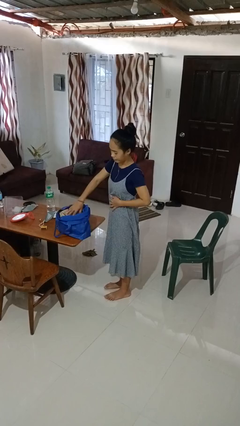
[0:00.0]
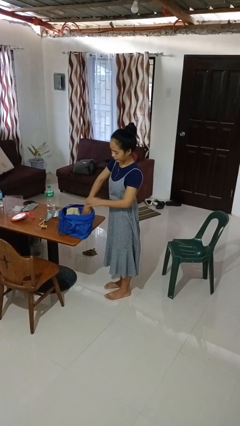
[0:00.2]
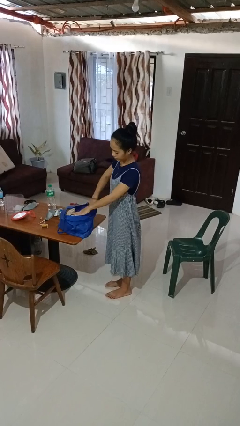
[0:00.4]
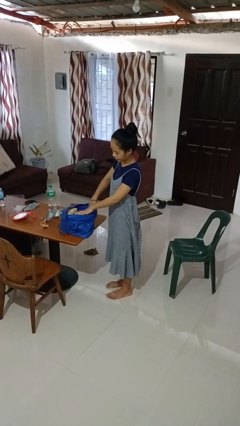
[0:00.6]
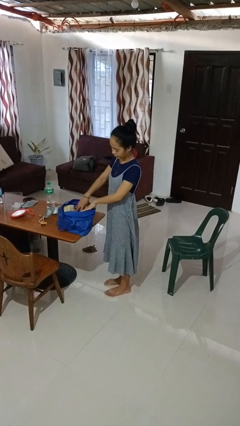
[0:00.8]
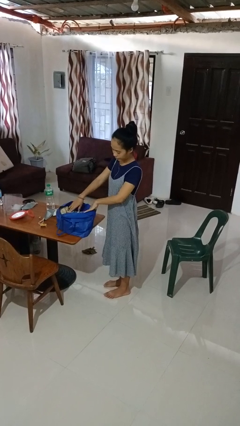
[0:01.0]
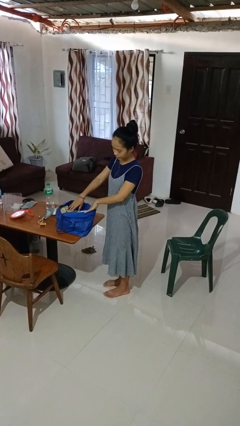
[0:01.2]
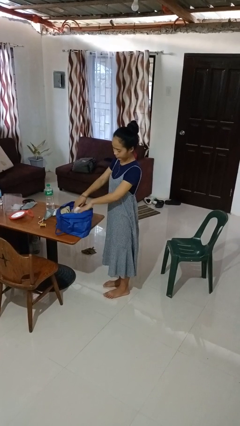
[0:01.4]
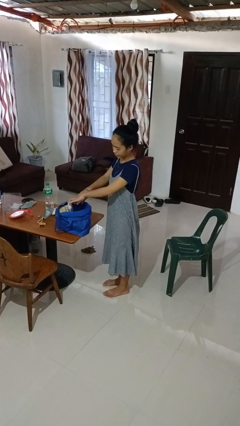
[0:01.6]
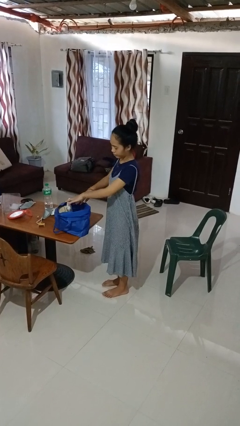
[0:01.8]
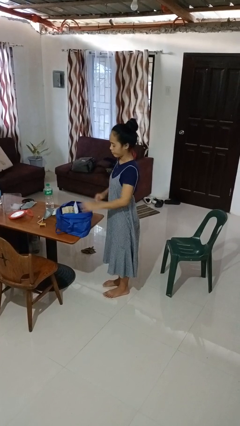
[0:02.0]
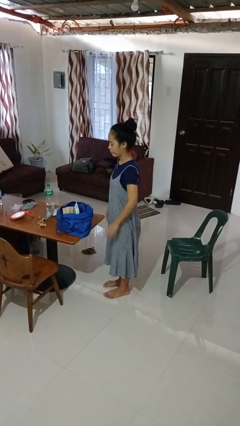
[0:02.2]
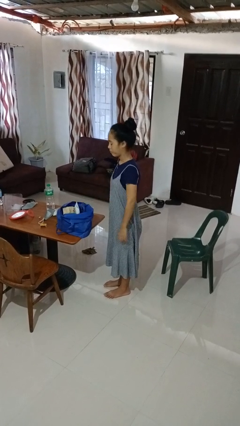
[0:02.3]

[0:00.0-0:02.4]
person searches in bag

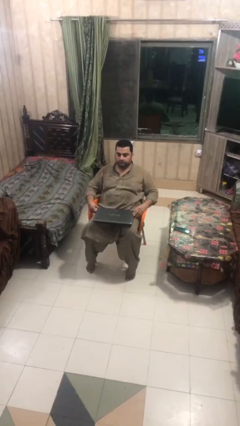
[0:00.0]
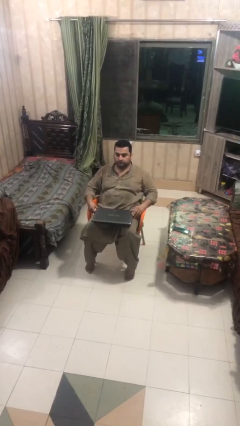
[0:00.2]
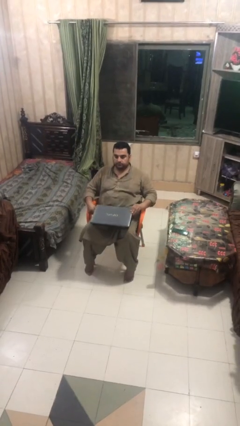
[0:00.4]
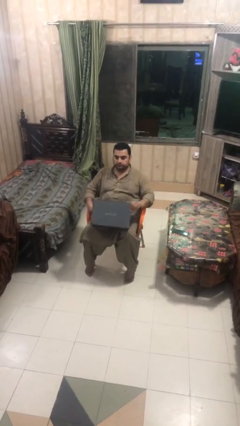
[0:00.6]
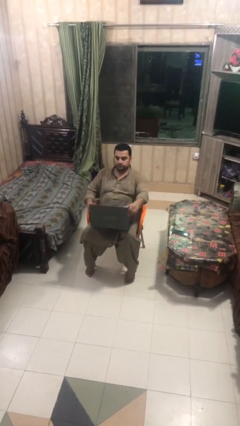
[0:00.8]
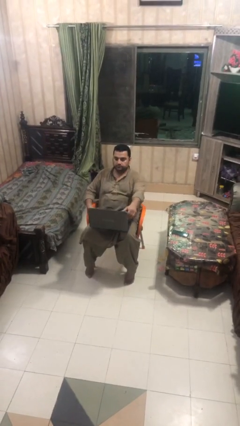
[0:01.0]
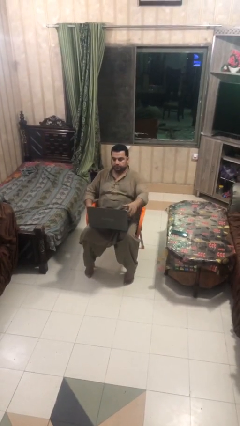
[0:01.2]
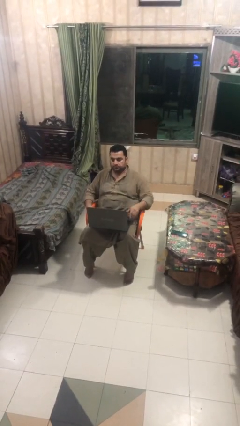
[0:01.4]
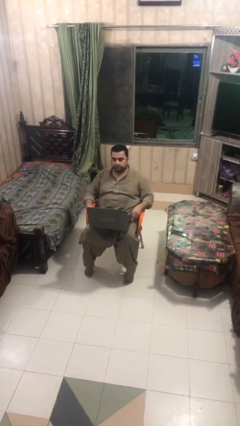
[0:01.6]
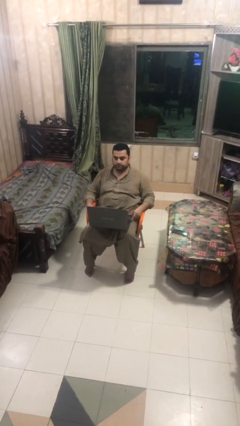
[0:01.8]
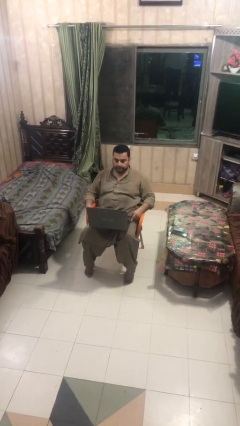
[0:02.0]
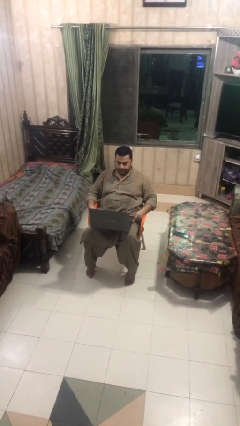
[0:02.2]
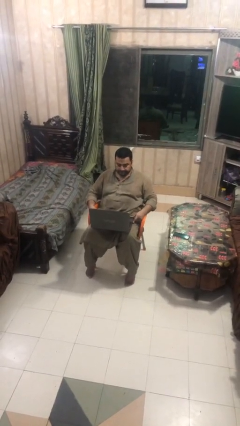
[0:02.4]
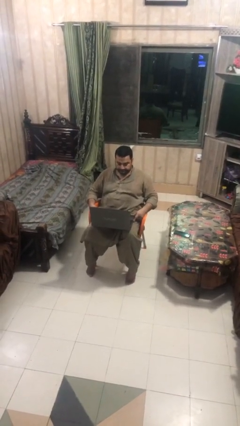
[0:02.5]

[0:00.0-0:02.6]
person opens laptop

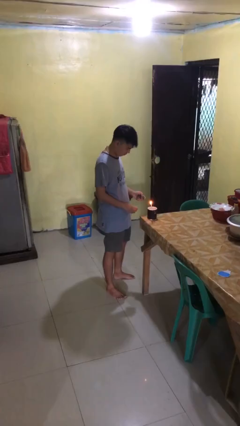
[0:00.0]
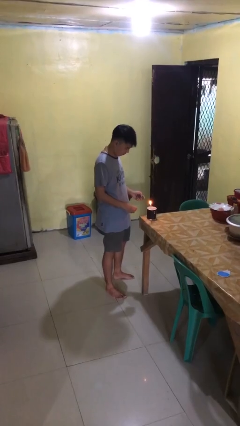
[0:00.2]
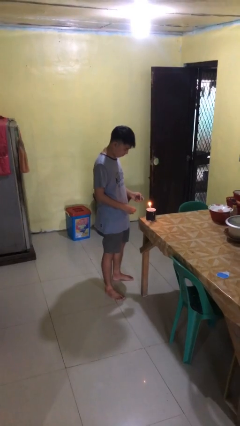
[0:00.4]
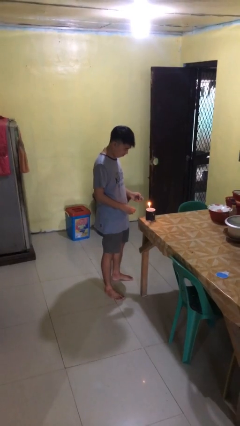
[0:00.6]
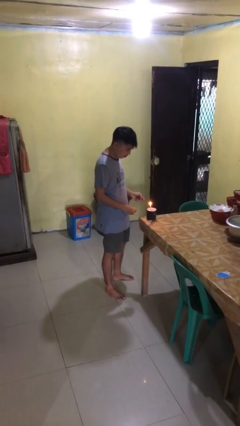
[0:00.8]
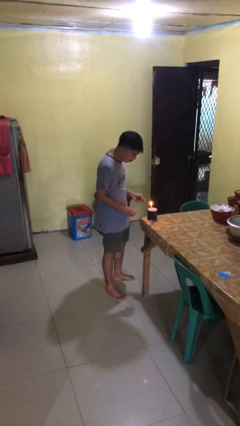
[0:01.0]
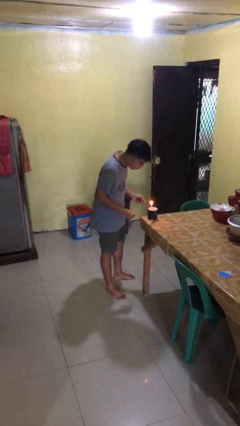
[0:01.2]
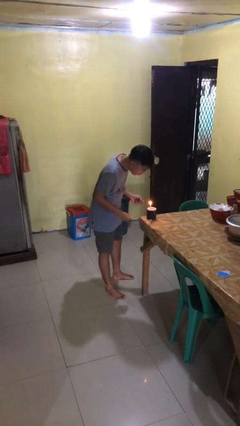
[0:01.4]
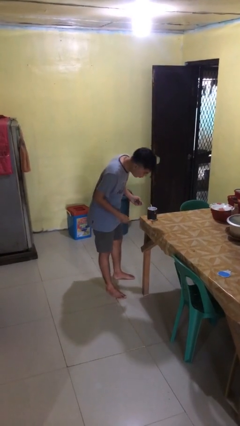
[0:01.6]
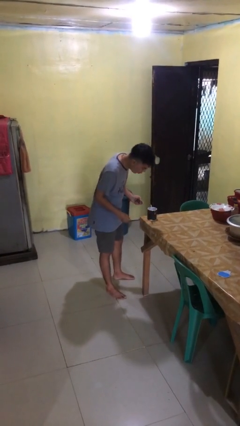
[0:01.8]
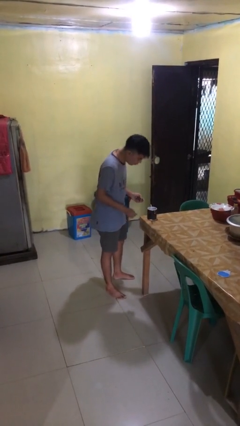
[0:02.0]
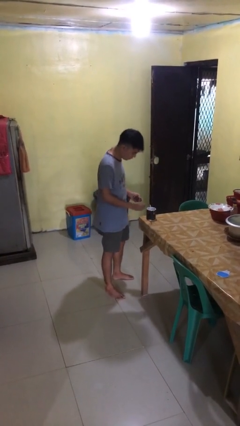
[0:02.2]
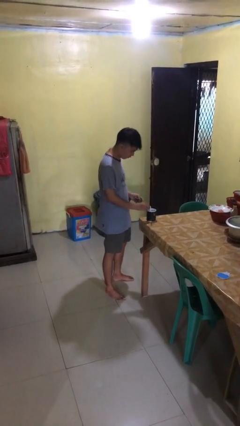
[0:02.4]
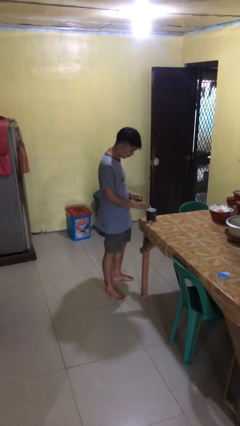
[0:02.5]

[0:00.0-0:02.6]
person extinguishes candle

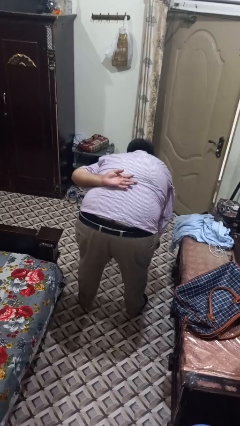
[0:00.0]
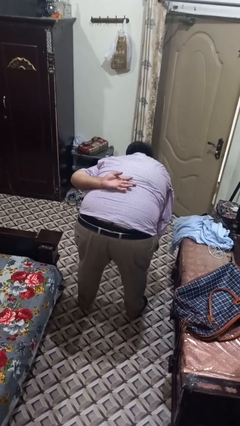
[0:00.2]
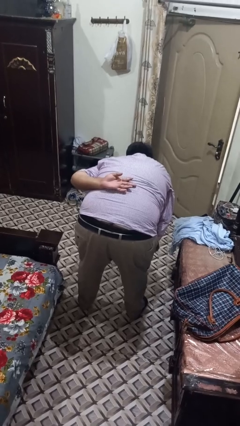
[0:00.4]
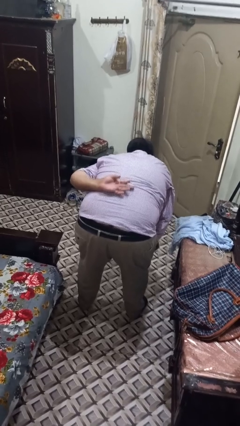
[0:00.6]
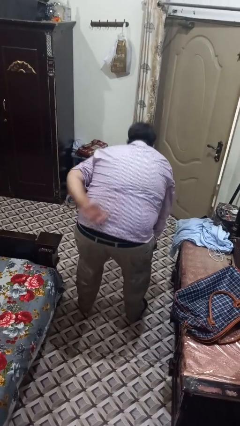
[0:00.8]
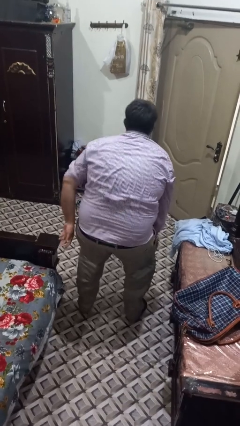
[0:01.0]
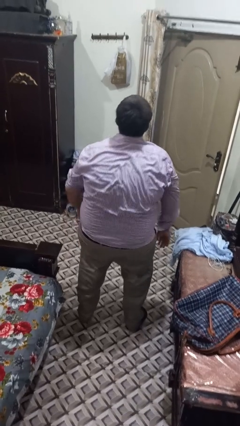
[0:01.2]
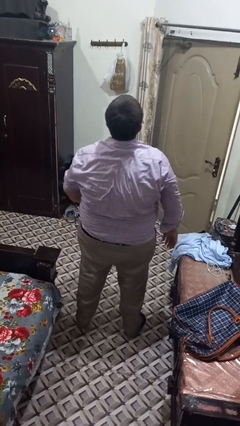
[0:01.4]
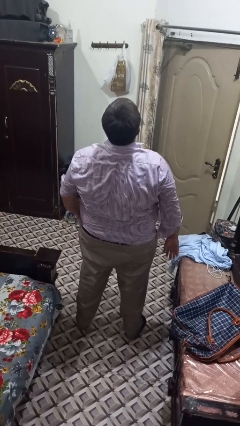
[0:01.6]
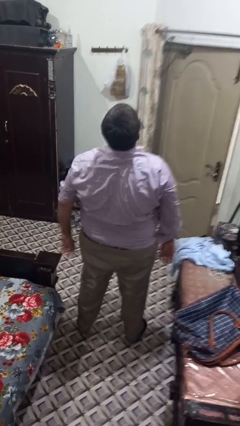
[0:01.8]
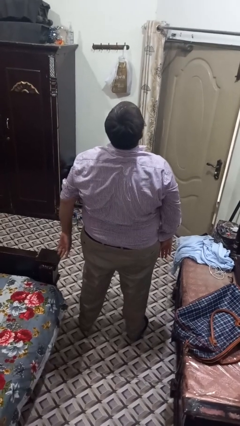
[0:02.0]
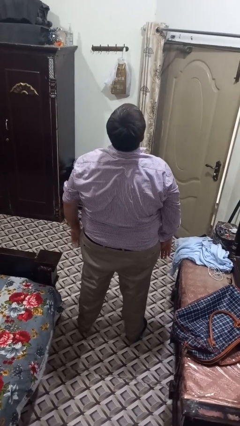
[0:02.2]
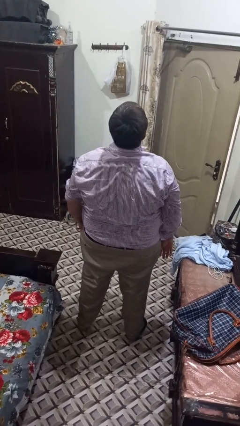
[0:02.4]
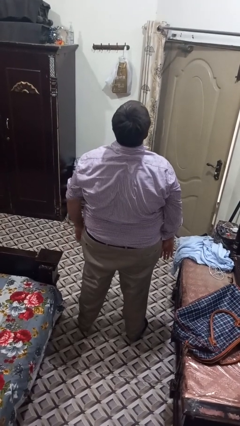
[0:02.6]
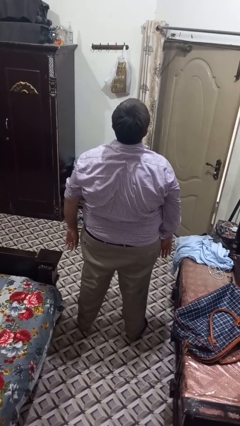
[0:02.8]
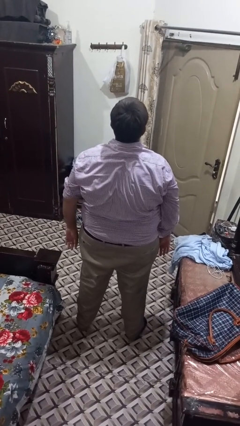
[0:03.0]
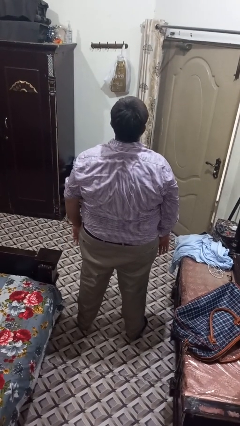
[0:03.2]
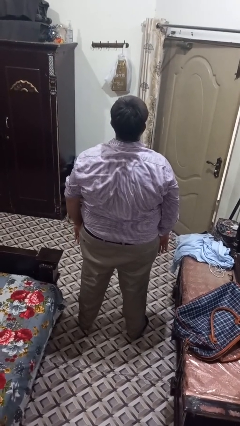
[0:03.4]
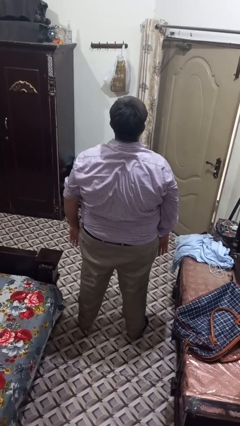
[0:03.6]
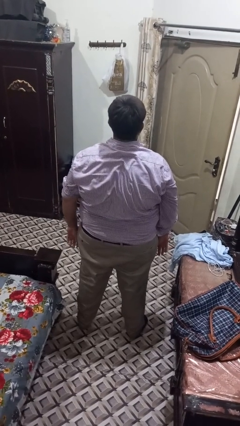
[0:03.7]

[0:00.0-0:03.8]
person stands up from floor

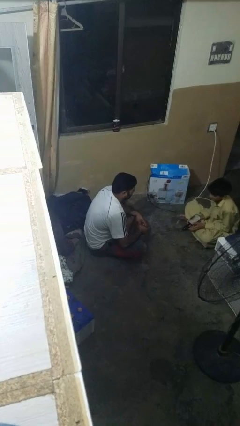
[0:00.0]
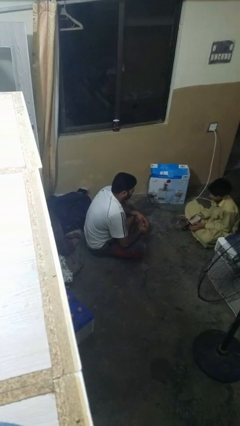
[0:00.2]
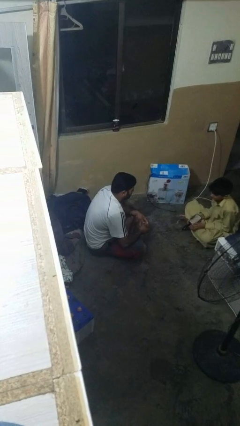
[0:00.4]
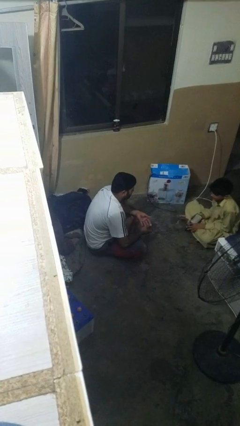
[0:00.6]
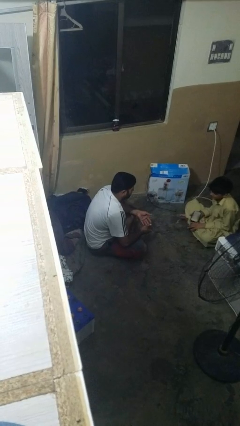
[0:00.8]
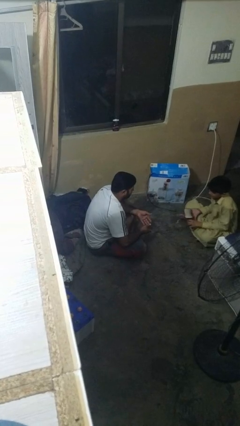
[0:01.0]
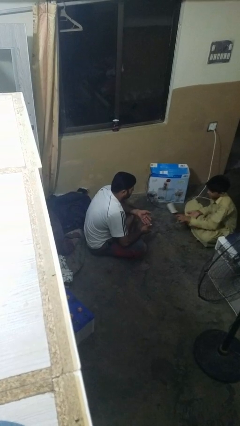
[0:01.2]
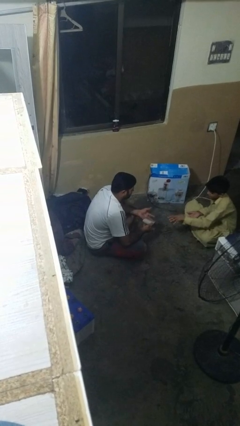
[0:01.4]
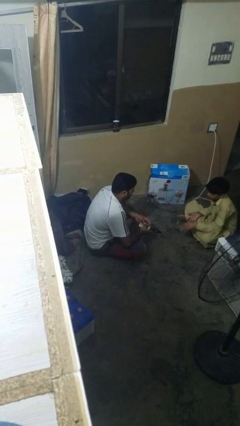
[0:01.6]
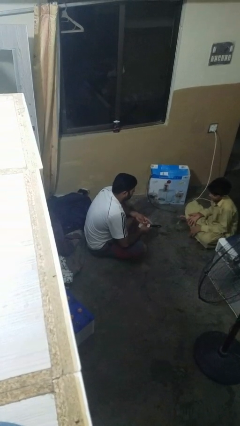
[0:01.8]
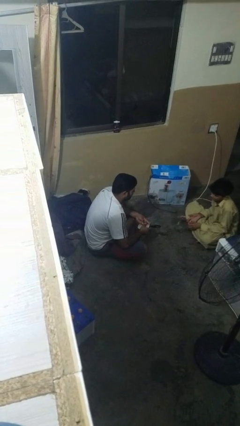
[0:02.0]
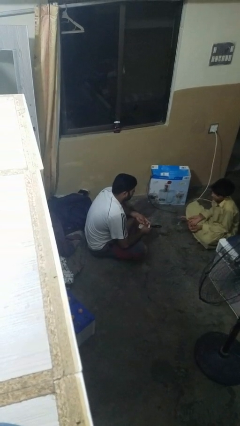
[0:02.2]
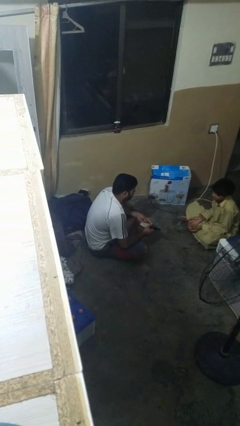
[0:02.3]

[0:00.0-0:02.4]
person catches object from person

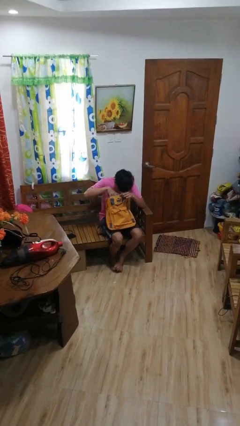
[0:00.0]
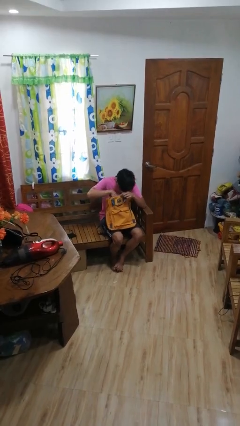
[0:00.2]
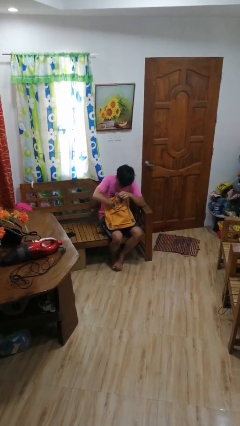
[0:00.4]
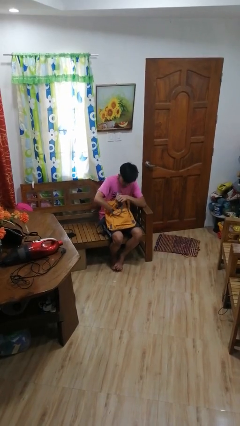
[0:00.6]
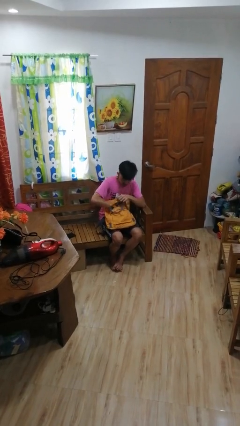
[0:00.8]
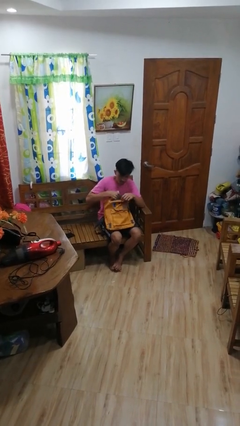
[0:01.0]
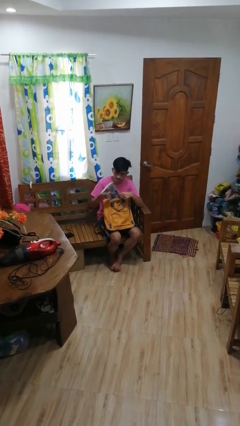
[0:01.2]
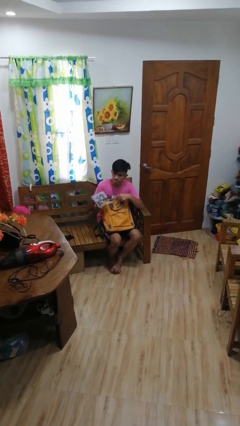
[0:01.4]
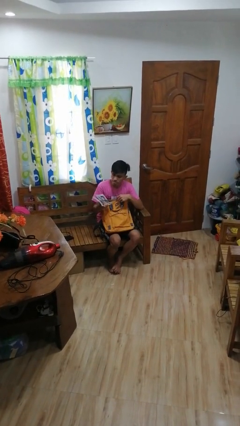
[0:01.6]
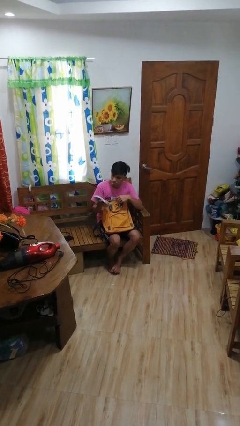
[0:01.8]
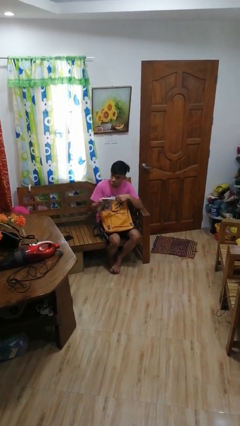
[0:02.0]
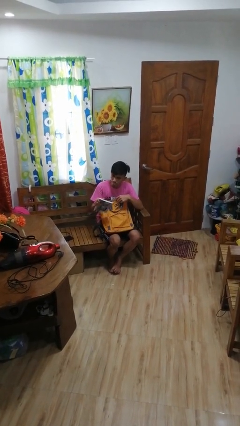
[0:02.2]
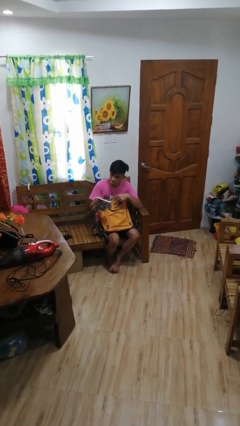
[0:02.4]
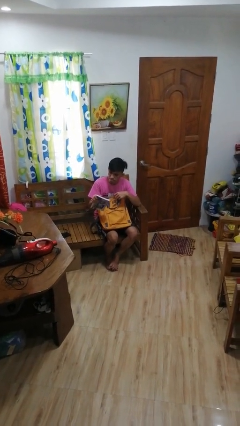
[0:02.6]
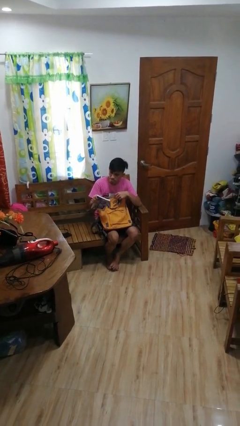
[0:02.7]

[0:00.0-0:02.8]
person takes object from backpack

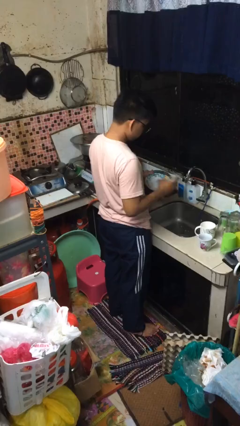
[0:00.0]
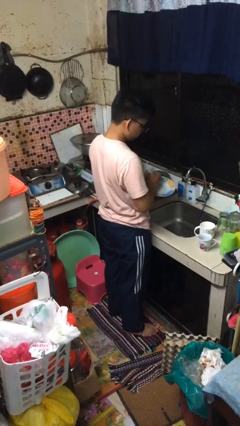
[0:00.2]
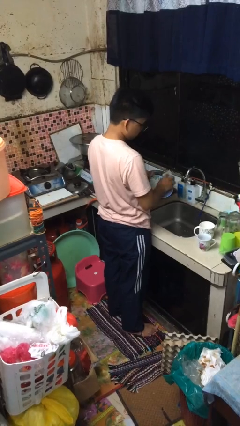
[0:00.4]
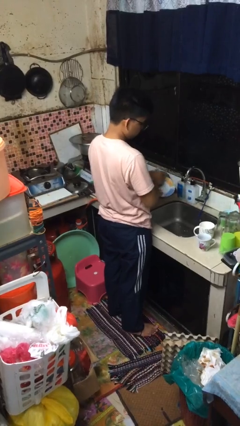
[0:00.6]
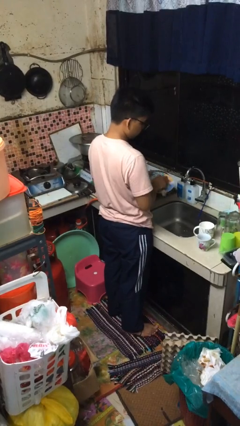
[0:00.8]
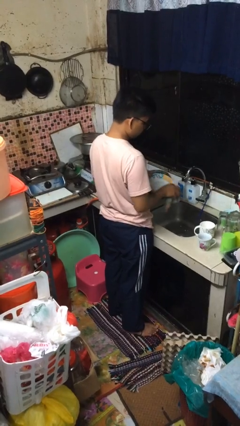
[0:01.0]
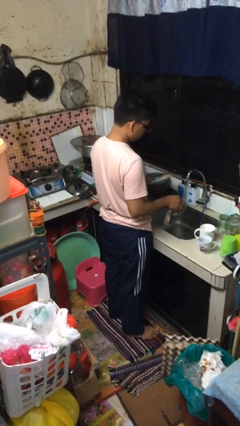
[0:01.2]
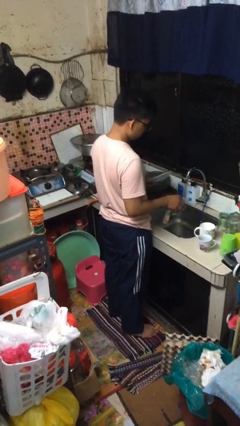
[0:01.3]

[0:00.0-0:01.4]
person dries dish
